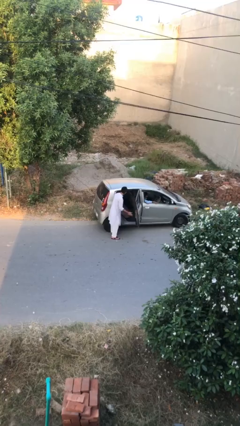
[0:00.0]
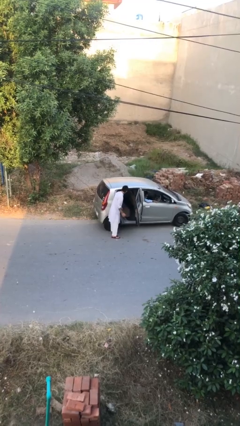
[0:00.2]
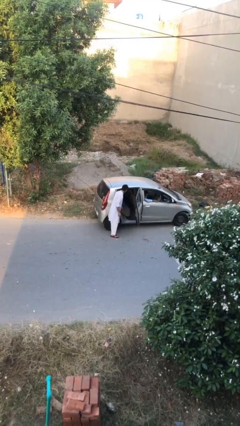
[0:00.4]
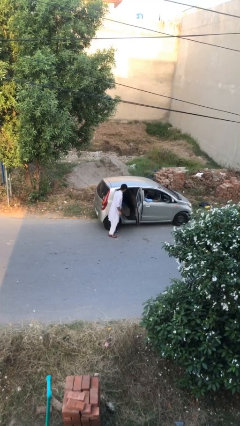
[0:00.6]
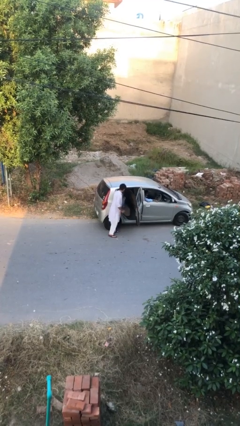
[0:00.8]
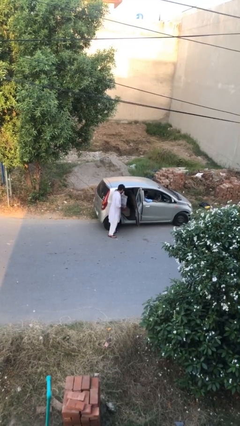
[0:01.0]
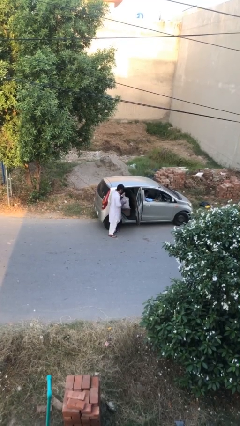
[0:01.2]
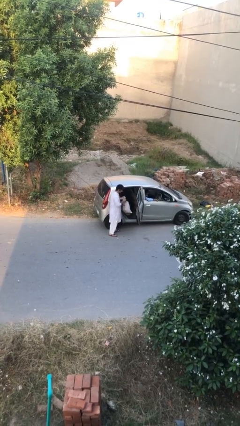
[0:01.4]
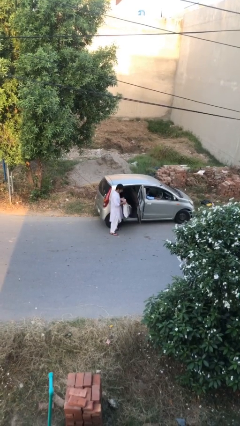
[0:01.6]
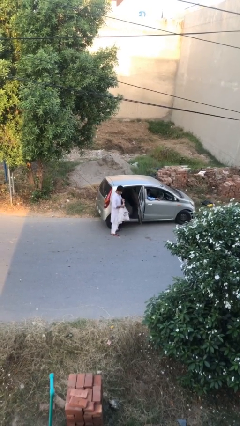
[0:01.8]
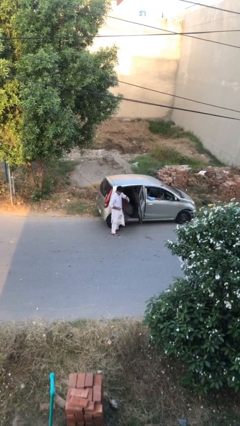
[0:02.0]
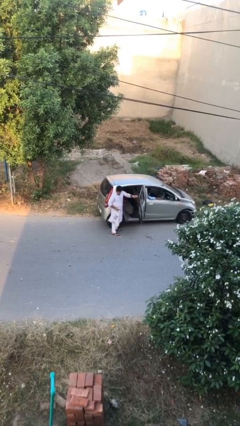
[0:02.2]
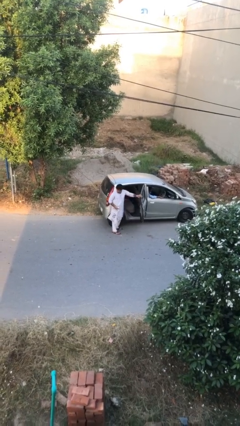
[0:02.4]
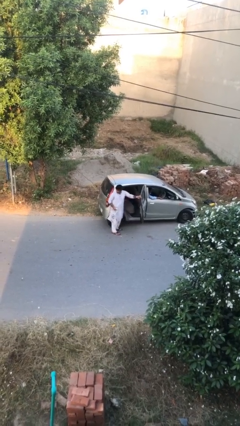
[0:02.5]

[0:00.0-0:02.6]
person unloads car

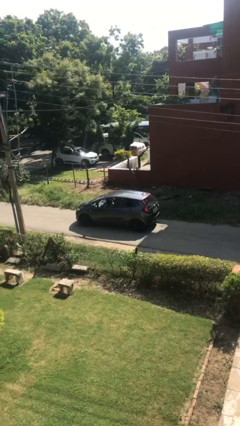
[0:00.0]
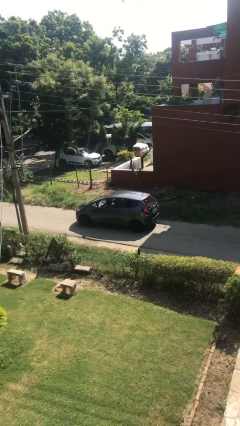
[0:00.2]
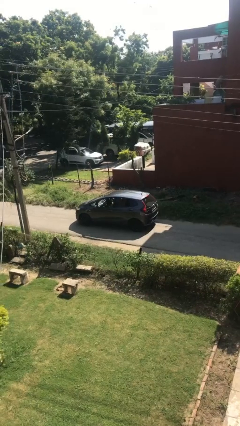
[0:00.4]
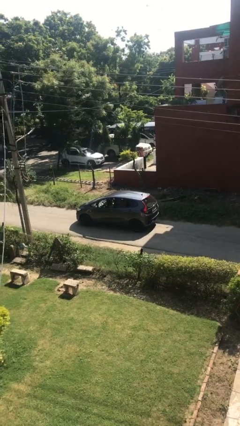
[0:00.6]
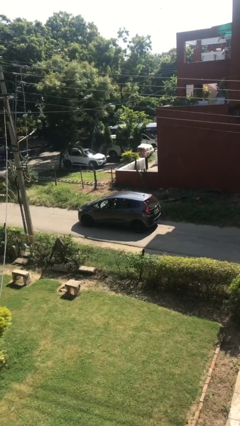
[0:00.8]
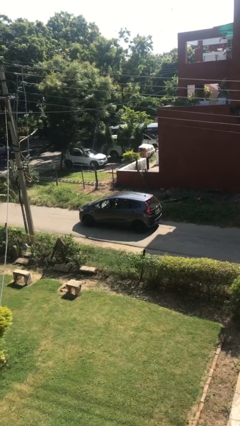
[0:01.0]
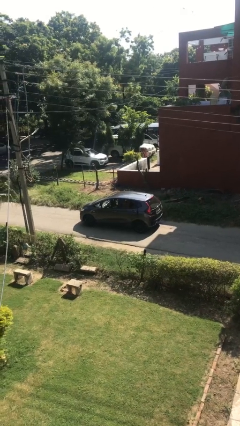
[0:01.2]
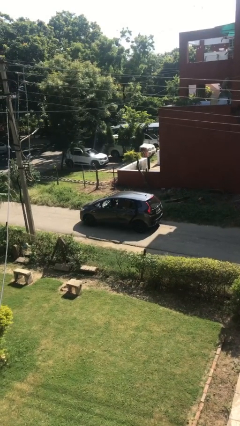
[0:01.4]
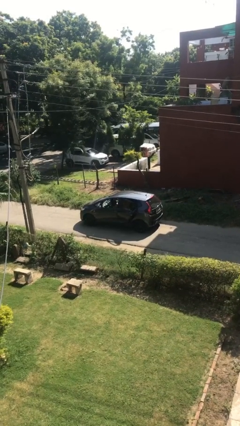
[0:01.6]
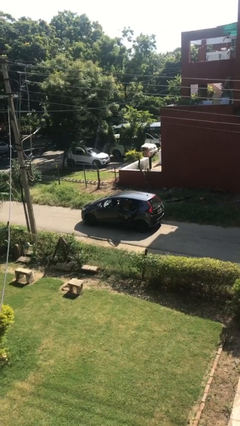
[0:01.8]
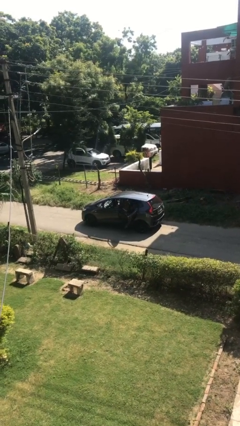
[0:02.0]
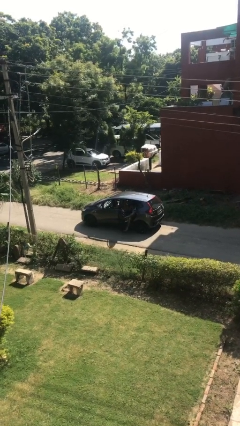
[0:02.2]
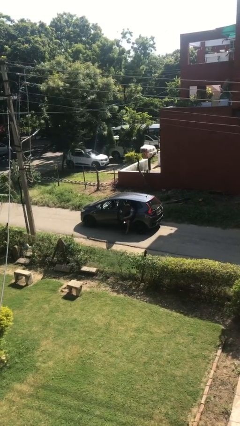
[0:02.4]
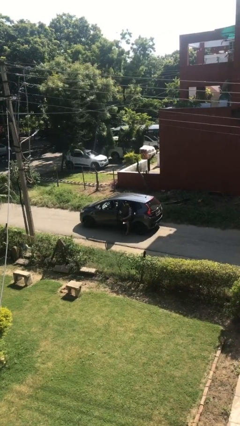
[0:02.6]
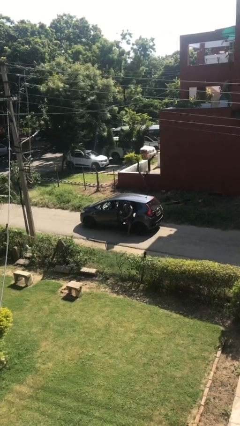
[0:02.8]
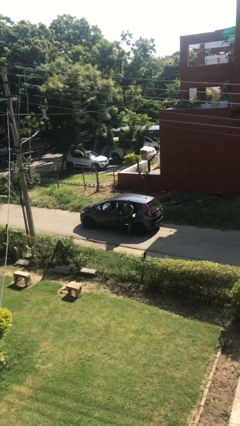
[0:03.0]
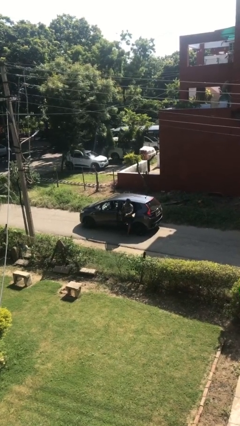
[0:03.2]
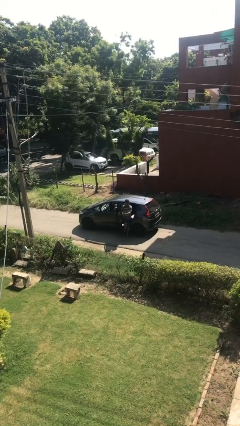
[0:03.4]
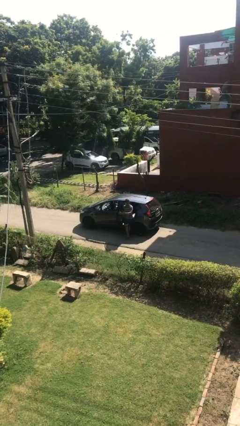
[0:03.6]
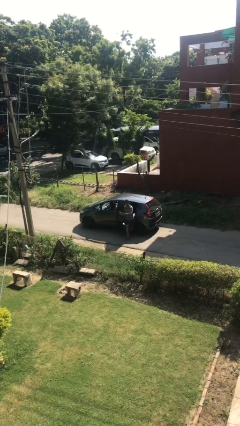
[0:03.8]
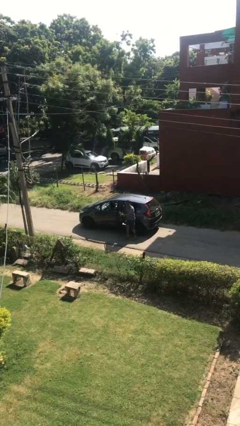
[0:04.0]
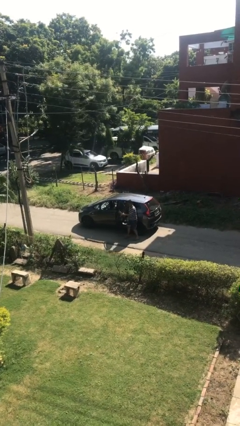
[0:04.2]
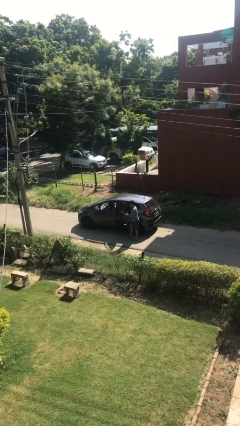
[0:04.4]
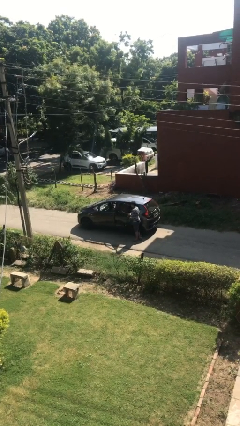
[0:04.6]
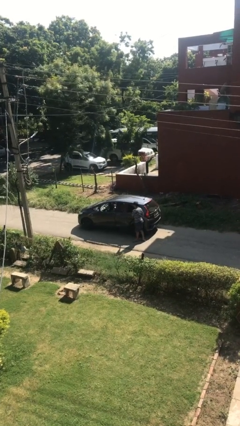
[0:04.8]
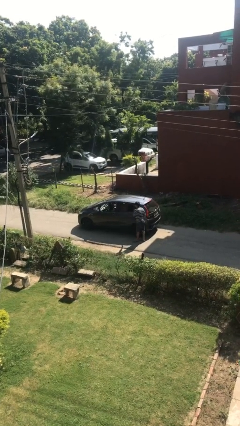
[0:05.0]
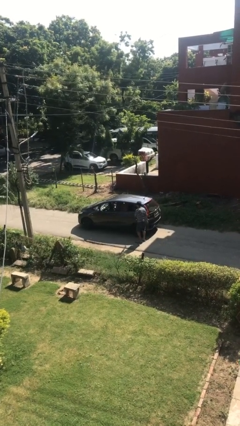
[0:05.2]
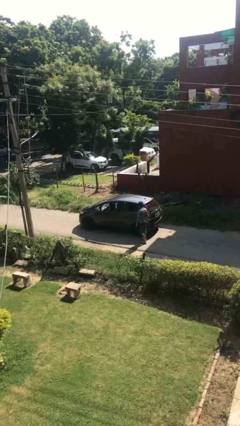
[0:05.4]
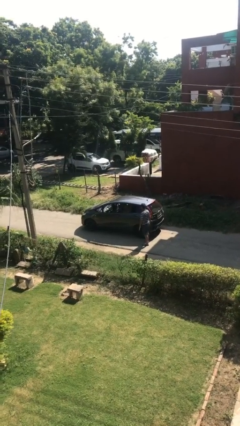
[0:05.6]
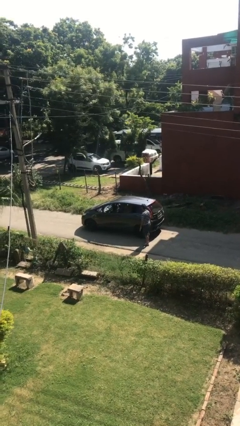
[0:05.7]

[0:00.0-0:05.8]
car drops off person

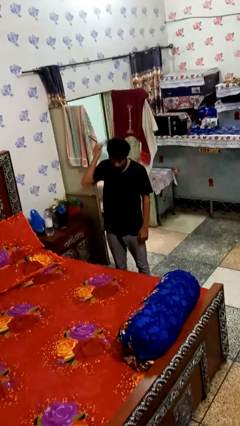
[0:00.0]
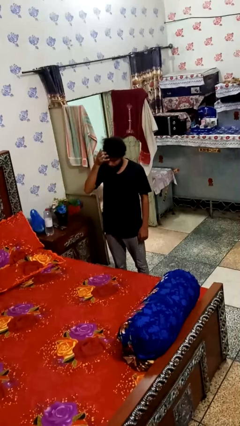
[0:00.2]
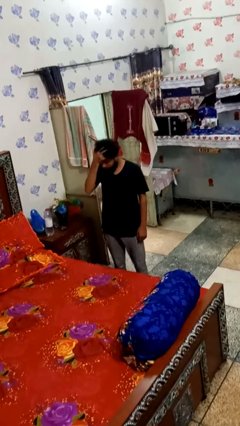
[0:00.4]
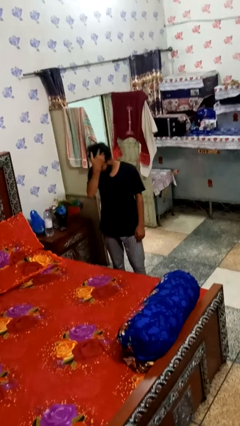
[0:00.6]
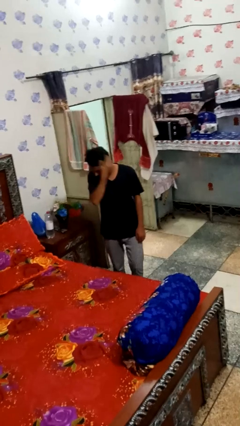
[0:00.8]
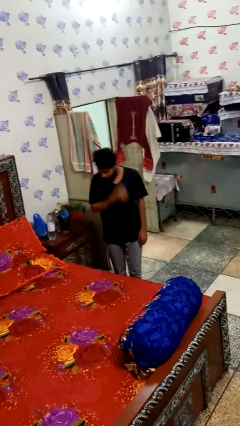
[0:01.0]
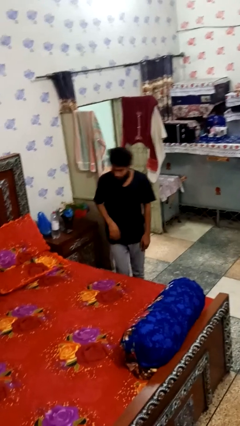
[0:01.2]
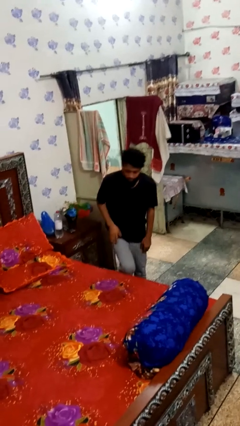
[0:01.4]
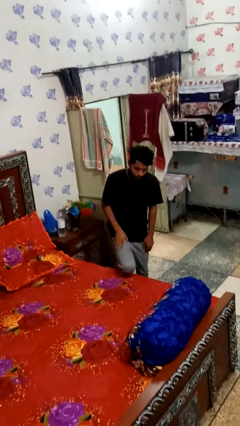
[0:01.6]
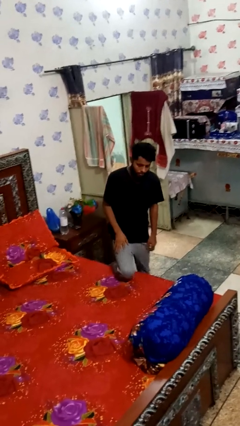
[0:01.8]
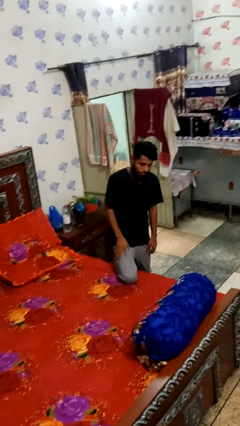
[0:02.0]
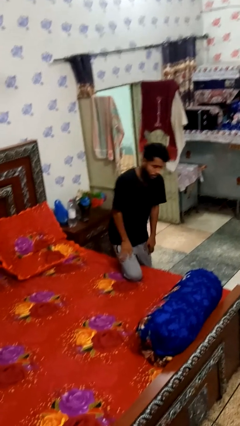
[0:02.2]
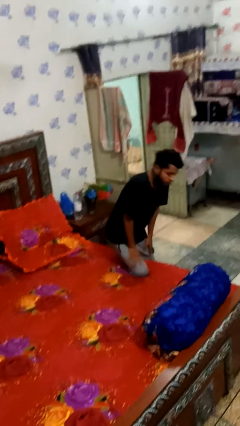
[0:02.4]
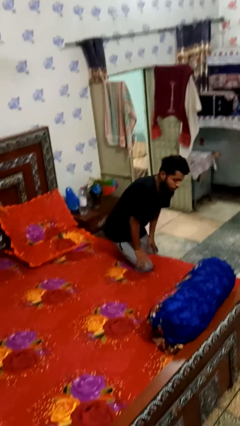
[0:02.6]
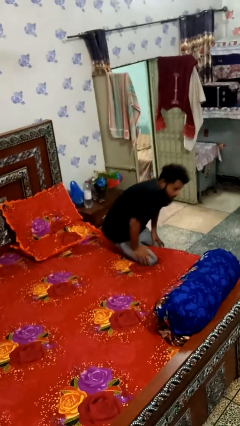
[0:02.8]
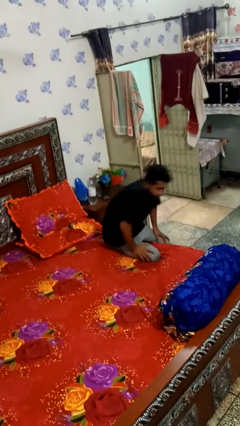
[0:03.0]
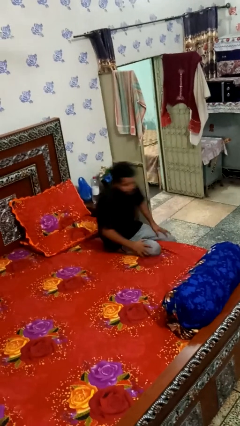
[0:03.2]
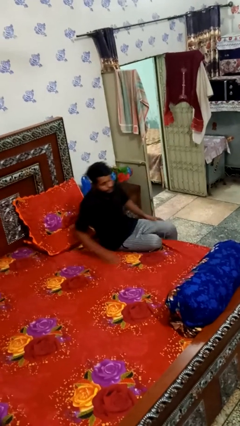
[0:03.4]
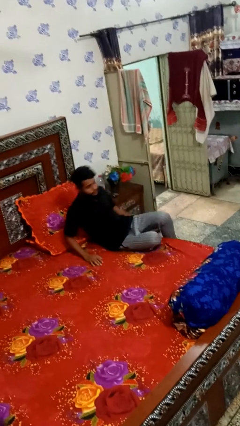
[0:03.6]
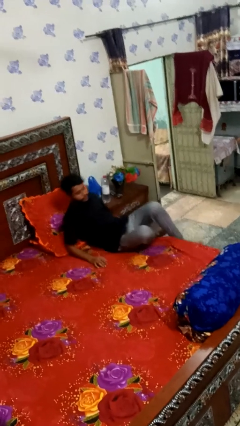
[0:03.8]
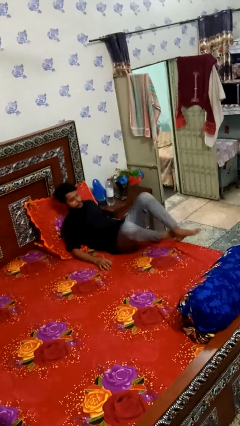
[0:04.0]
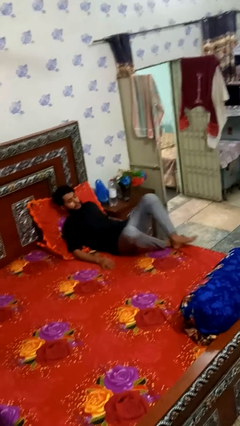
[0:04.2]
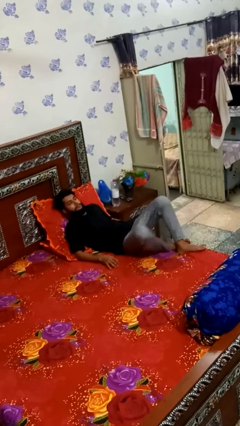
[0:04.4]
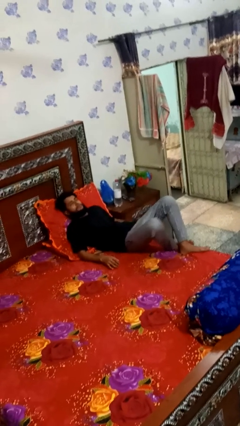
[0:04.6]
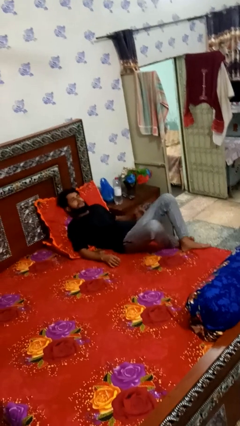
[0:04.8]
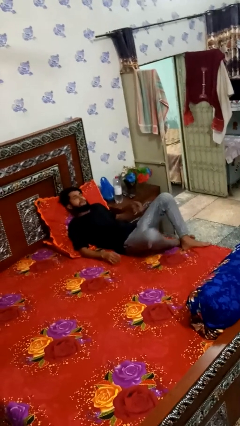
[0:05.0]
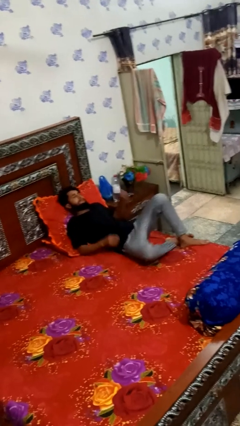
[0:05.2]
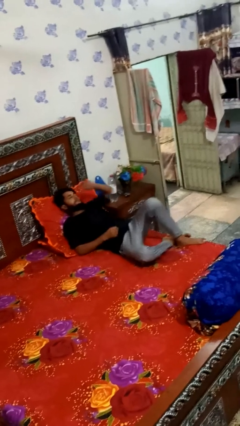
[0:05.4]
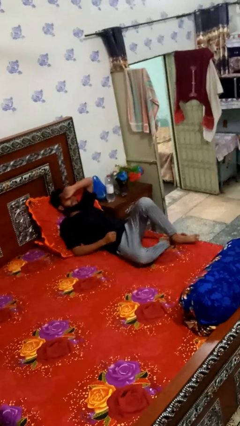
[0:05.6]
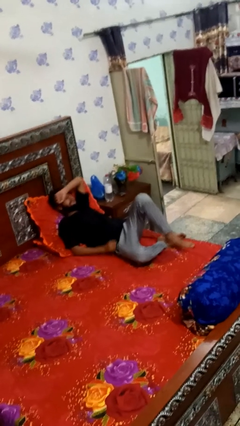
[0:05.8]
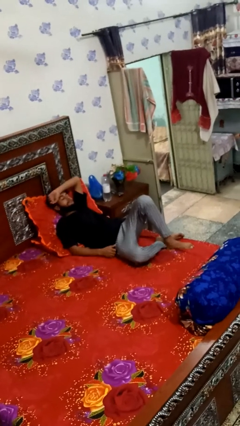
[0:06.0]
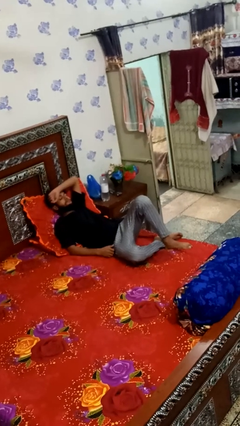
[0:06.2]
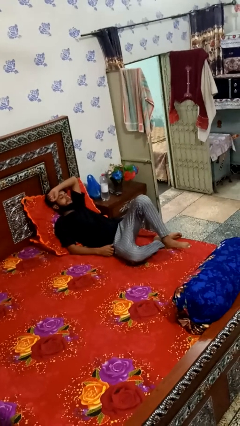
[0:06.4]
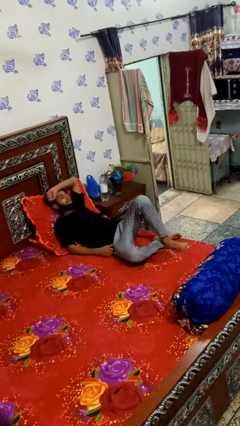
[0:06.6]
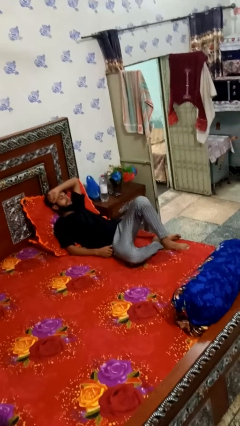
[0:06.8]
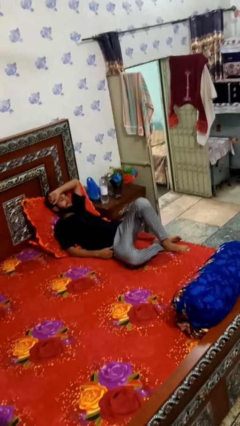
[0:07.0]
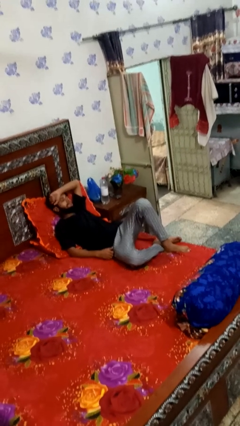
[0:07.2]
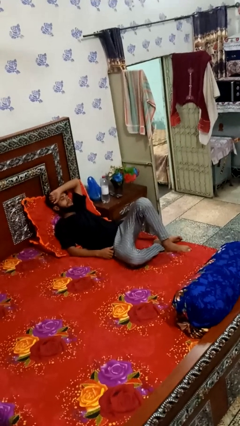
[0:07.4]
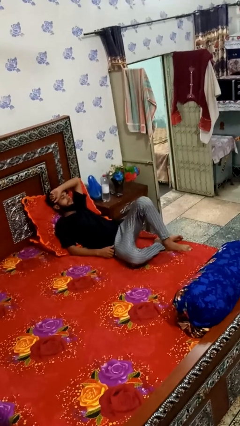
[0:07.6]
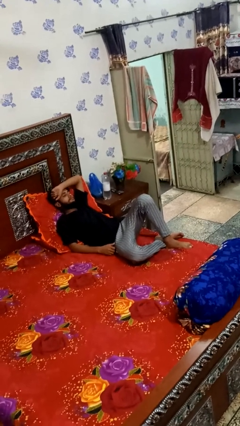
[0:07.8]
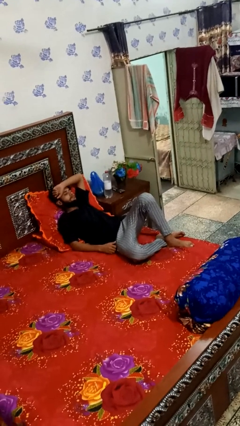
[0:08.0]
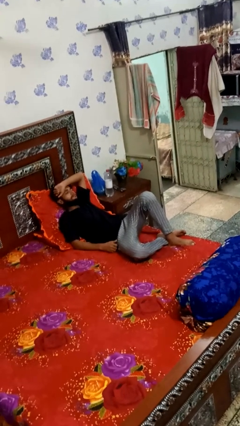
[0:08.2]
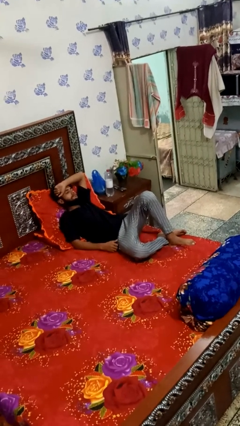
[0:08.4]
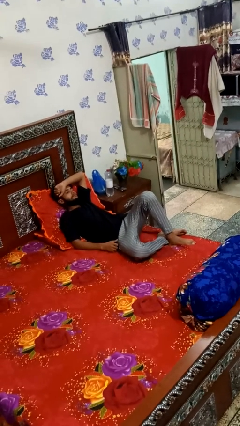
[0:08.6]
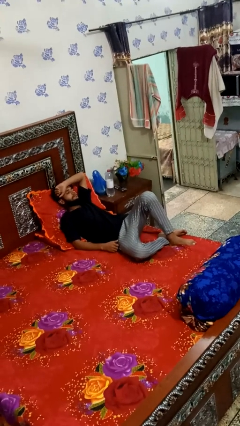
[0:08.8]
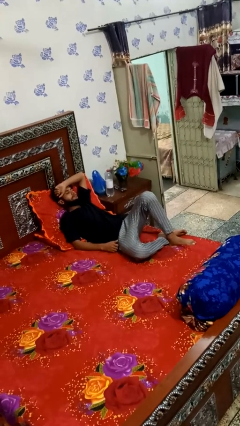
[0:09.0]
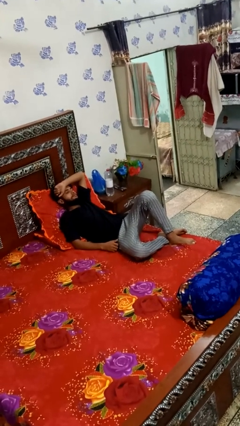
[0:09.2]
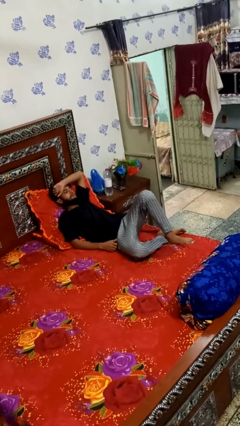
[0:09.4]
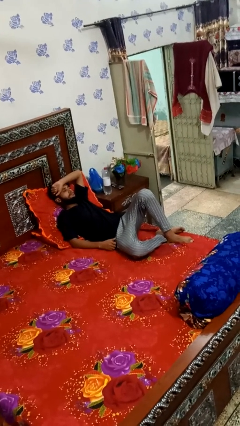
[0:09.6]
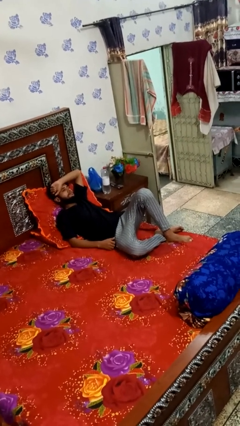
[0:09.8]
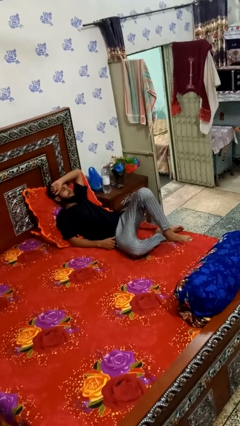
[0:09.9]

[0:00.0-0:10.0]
person lies down on bed
